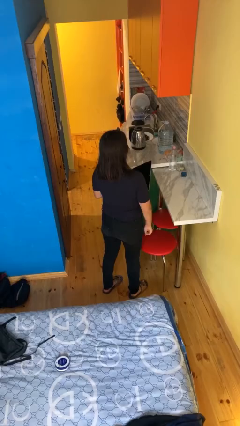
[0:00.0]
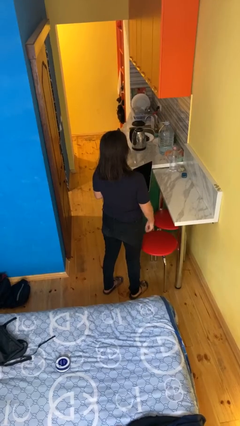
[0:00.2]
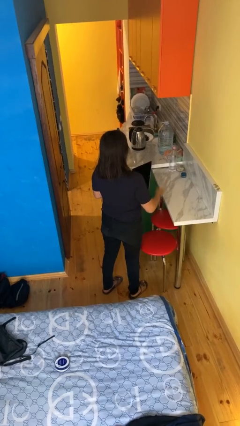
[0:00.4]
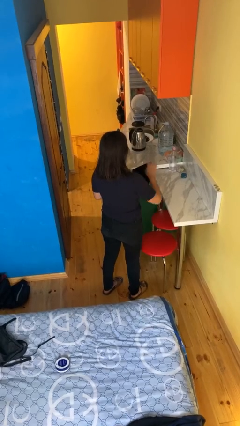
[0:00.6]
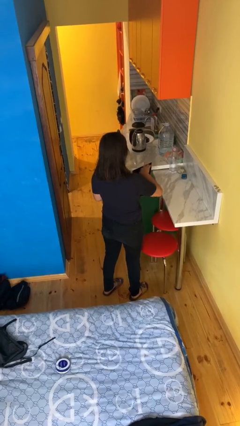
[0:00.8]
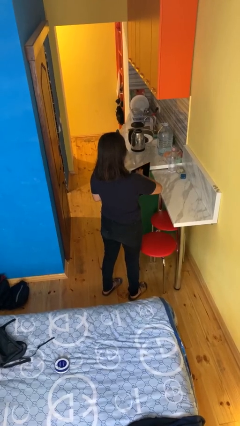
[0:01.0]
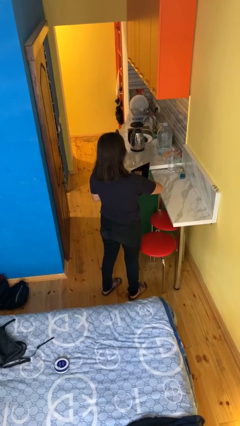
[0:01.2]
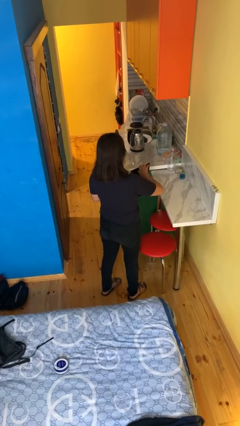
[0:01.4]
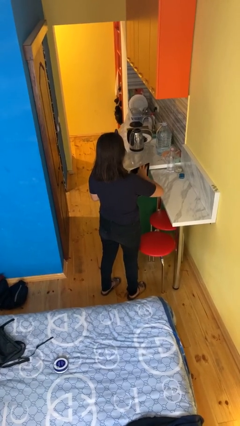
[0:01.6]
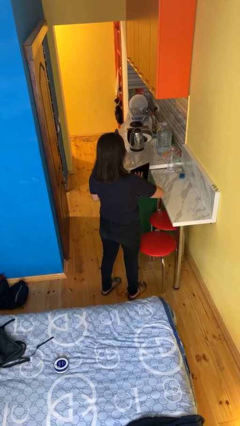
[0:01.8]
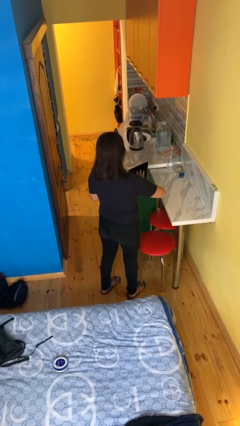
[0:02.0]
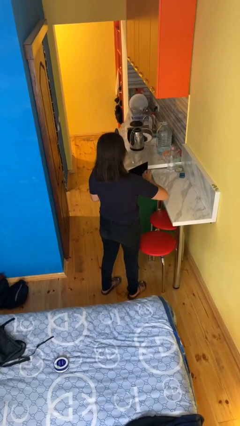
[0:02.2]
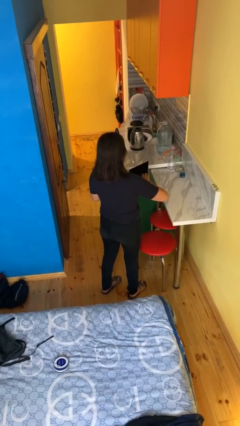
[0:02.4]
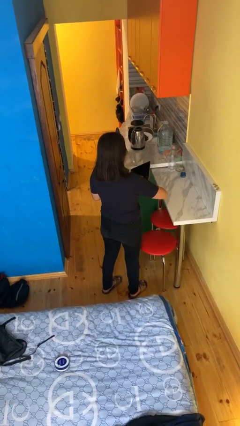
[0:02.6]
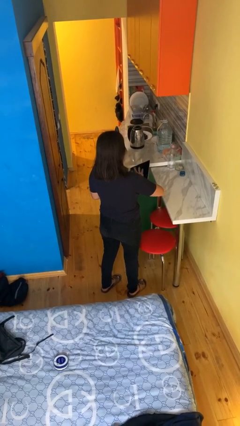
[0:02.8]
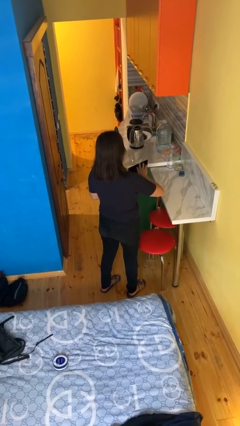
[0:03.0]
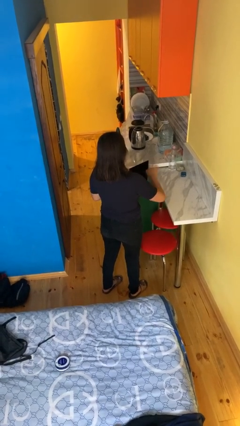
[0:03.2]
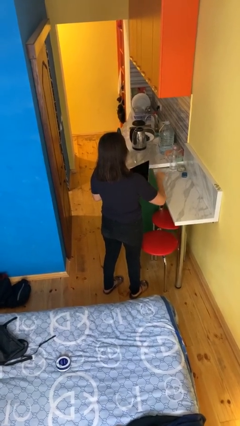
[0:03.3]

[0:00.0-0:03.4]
person interacts with tablet

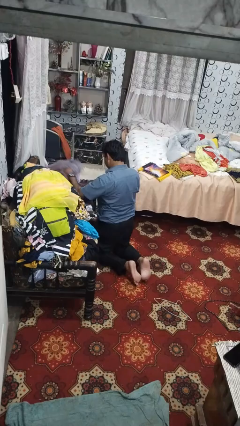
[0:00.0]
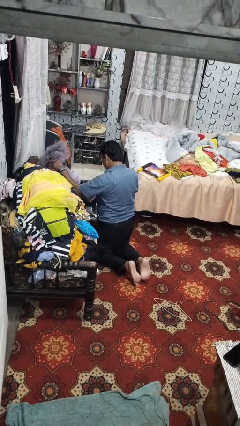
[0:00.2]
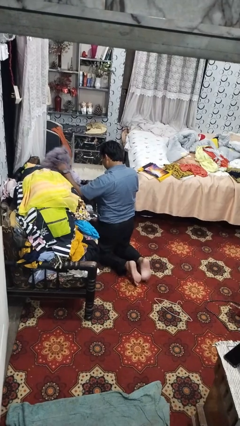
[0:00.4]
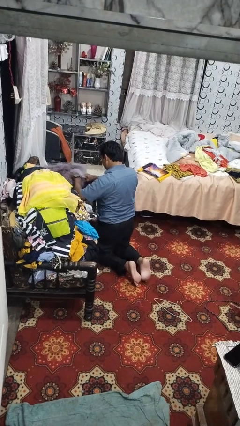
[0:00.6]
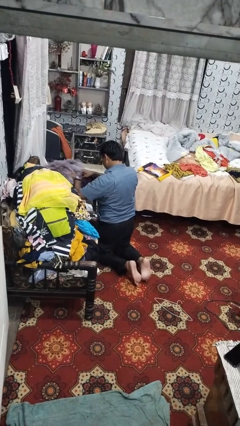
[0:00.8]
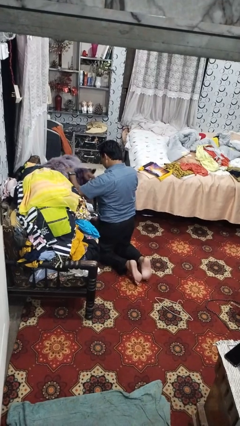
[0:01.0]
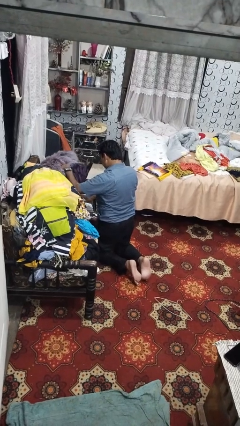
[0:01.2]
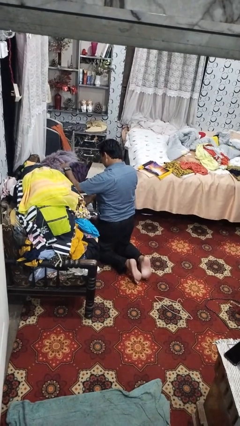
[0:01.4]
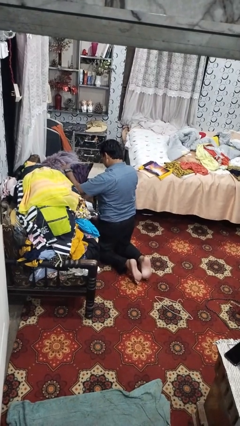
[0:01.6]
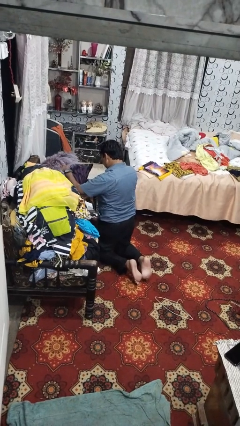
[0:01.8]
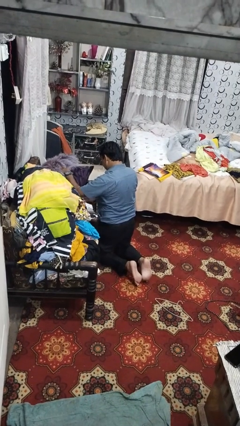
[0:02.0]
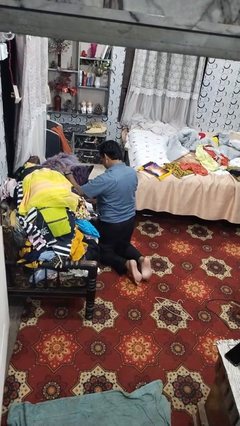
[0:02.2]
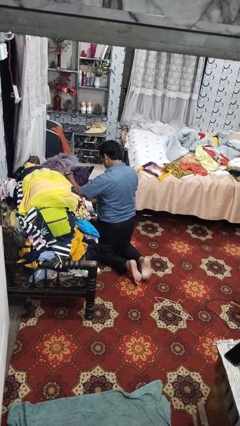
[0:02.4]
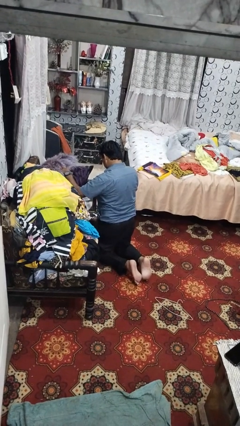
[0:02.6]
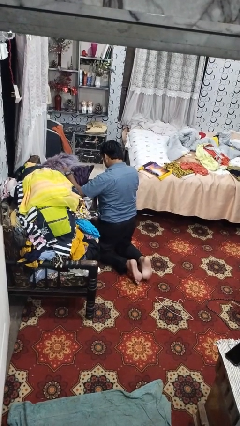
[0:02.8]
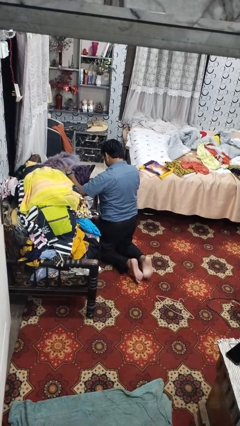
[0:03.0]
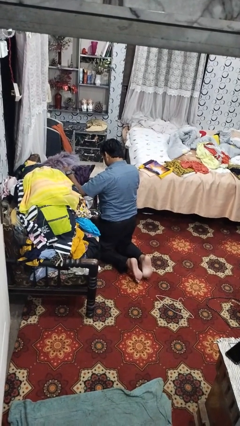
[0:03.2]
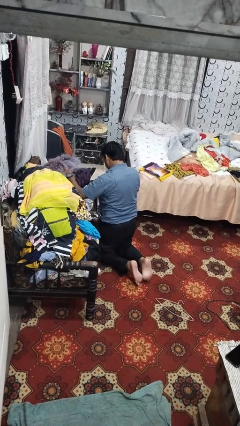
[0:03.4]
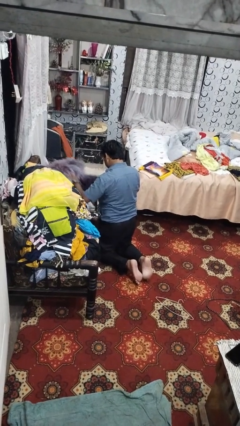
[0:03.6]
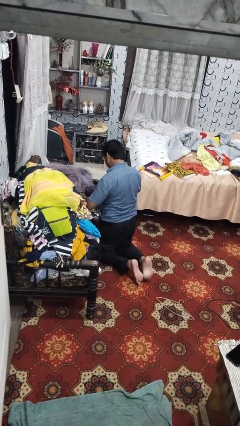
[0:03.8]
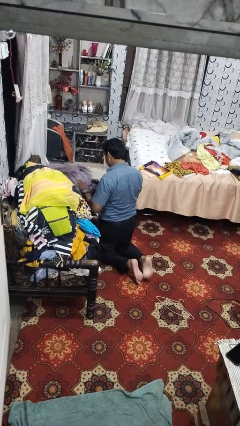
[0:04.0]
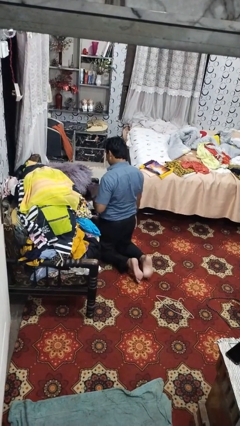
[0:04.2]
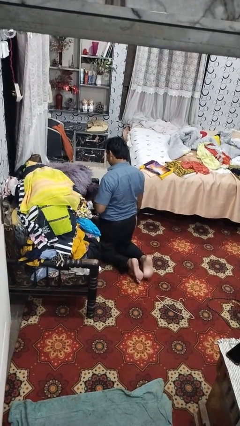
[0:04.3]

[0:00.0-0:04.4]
person searches in couch

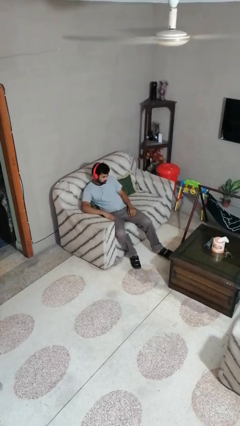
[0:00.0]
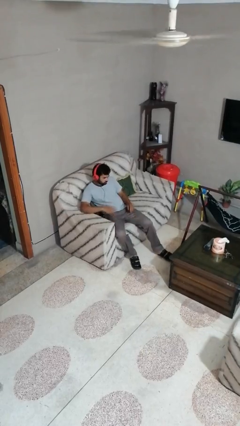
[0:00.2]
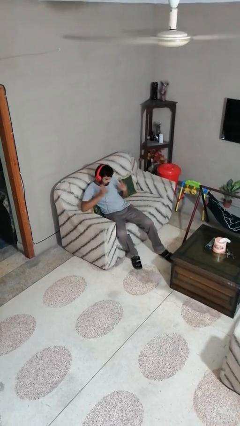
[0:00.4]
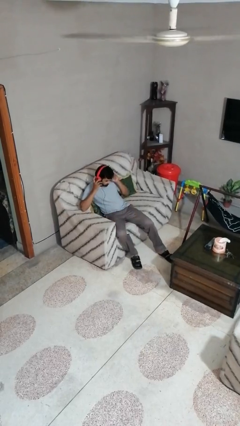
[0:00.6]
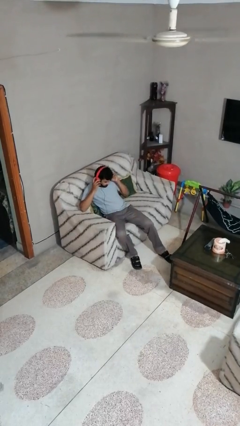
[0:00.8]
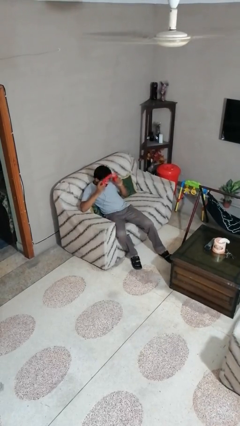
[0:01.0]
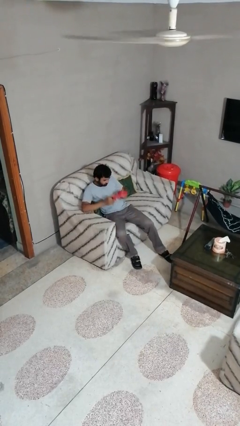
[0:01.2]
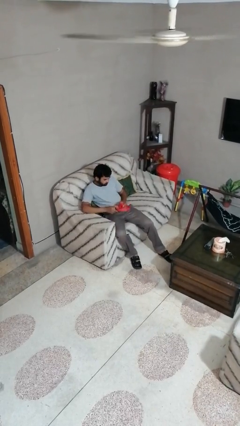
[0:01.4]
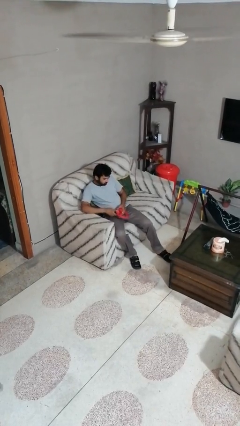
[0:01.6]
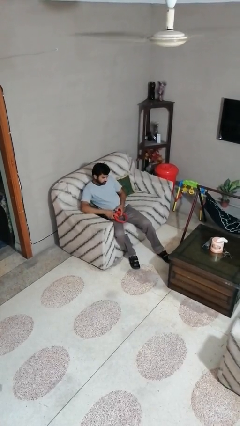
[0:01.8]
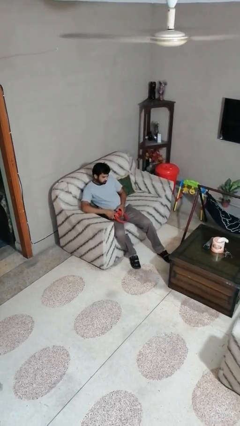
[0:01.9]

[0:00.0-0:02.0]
person takes off headphones

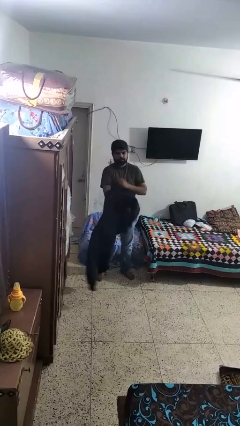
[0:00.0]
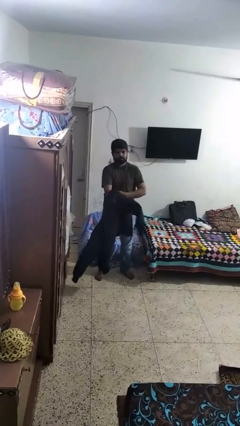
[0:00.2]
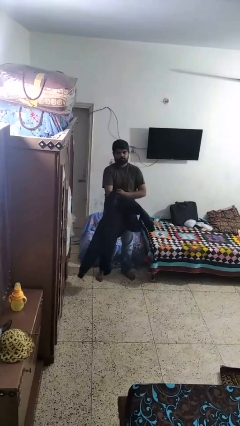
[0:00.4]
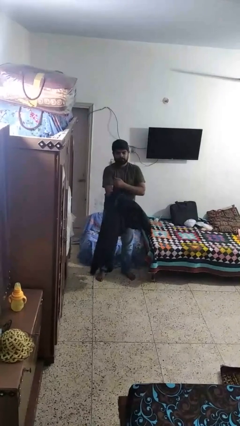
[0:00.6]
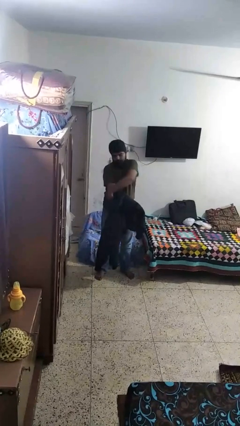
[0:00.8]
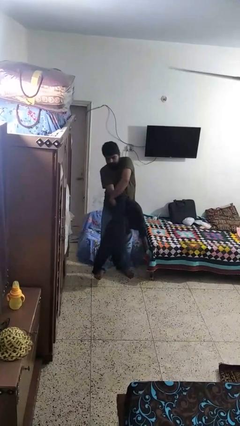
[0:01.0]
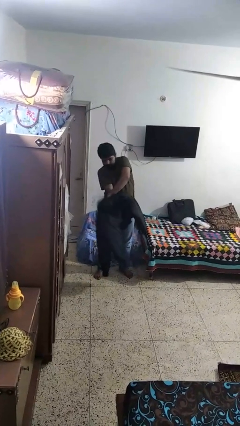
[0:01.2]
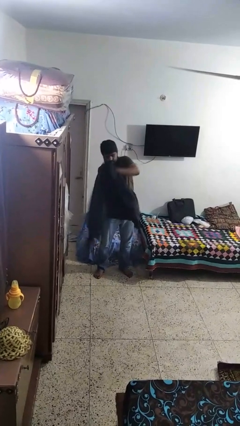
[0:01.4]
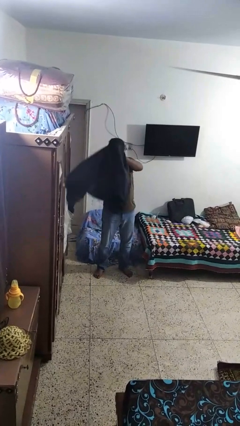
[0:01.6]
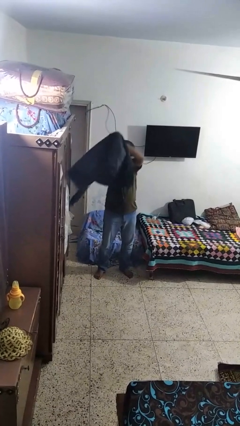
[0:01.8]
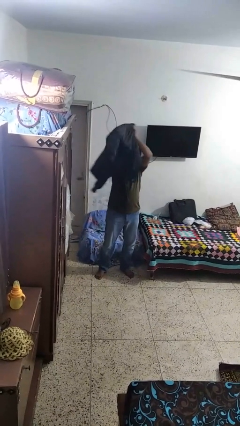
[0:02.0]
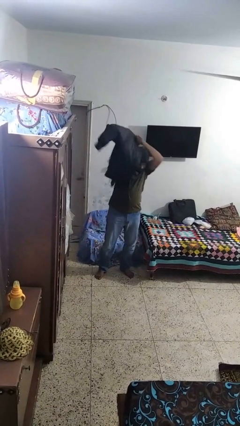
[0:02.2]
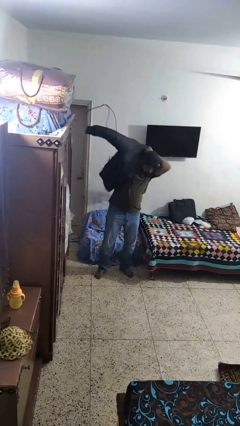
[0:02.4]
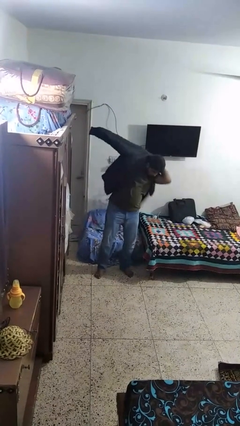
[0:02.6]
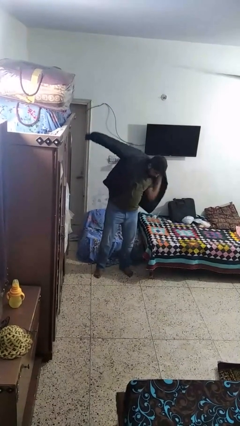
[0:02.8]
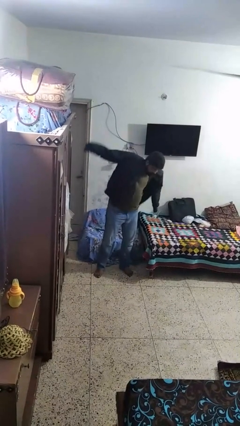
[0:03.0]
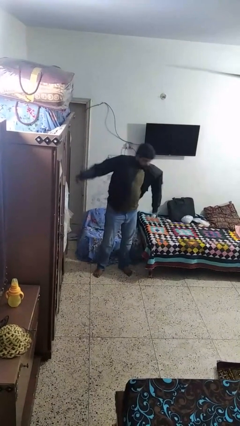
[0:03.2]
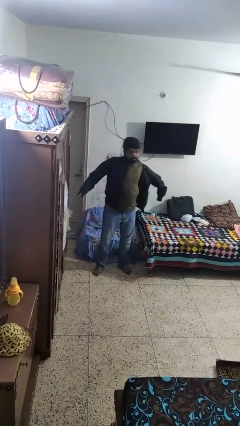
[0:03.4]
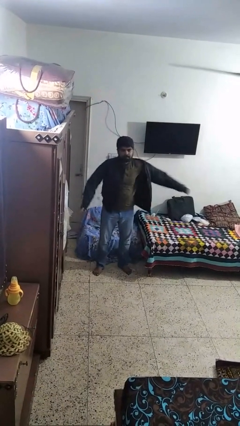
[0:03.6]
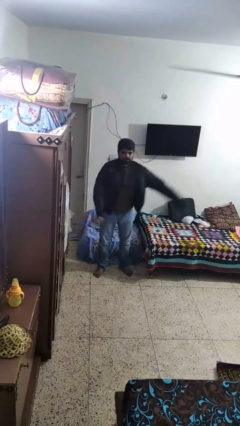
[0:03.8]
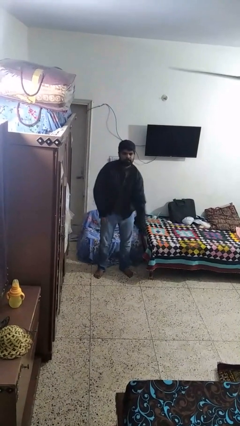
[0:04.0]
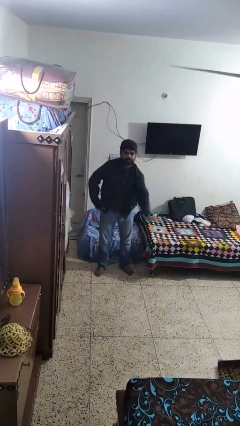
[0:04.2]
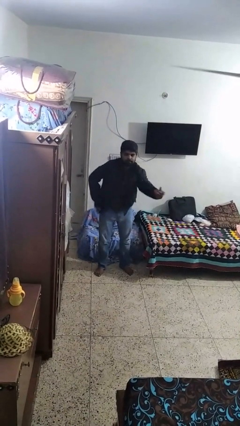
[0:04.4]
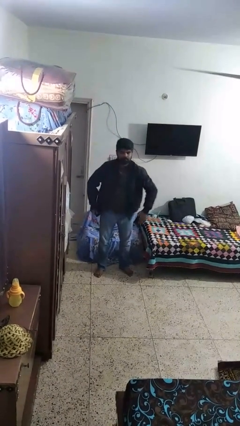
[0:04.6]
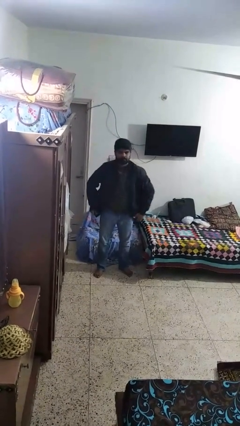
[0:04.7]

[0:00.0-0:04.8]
person puts on jacket

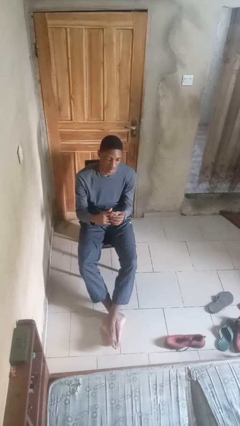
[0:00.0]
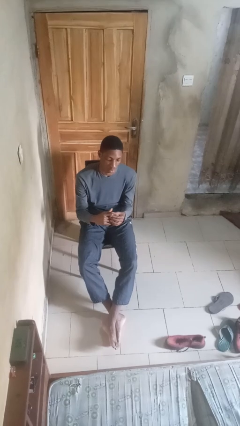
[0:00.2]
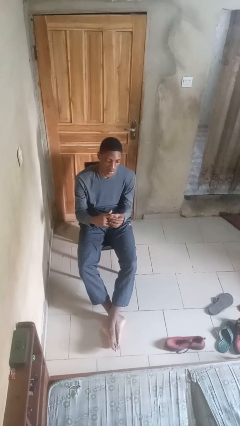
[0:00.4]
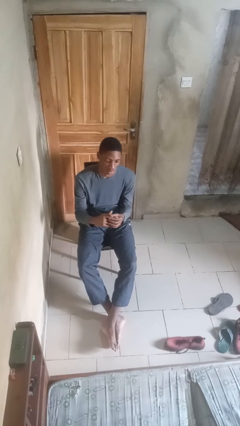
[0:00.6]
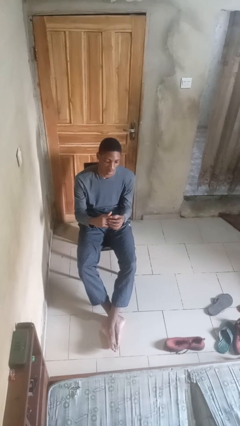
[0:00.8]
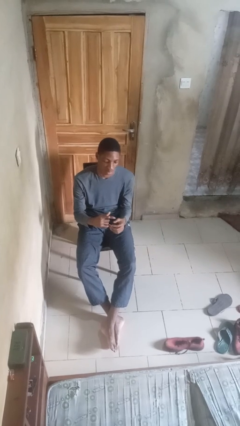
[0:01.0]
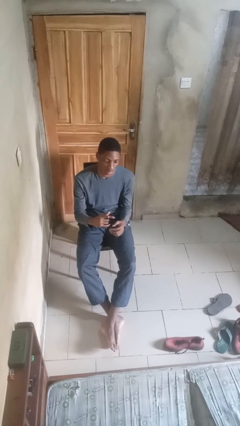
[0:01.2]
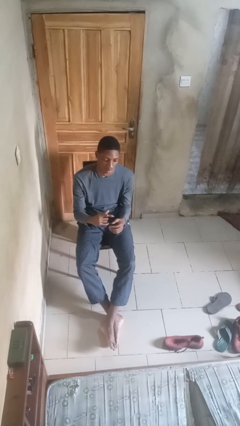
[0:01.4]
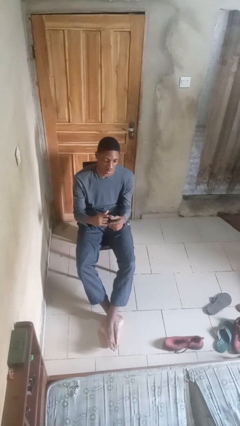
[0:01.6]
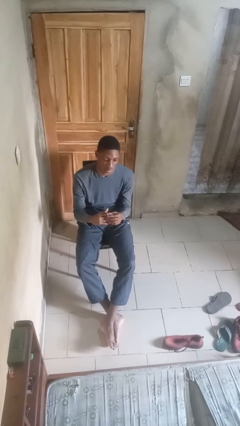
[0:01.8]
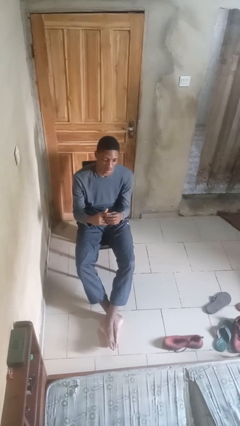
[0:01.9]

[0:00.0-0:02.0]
person puts on ring

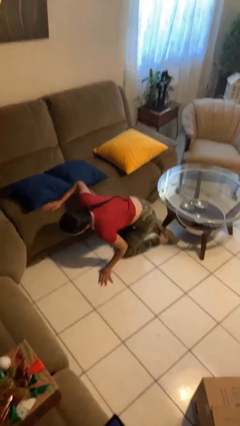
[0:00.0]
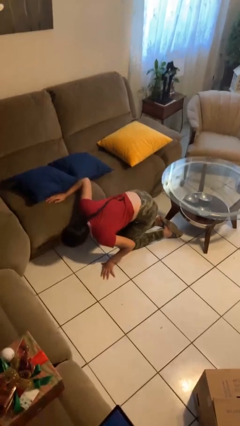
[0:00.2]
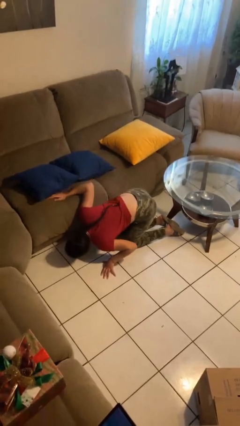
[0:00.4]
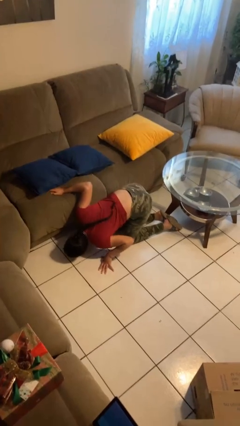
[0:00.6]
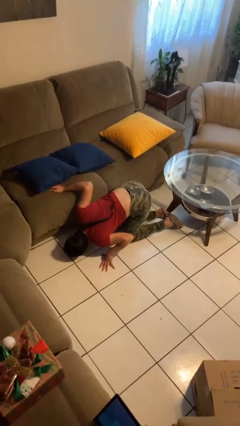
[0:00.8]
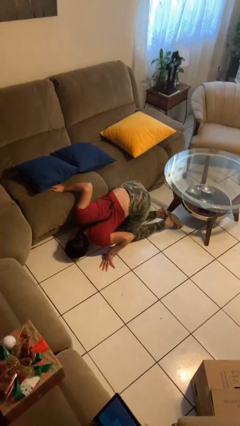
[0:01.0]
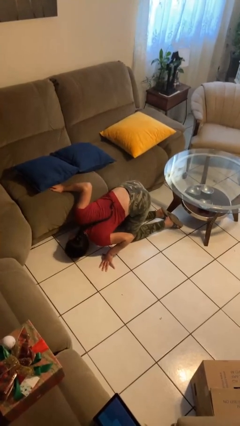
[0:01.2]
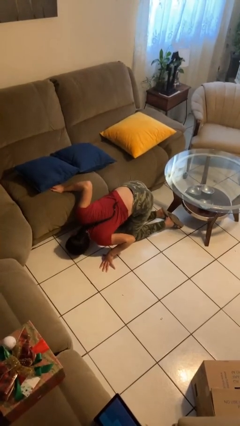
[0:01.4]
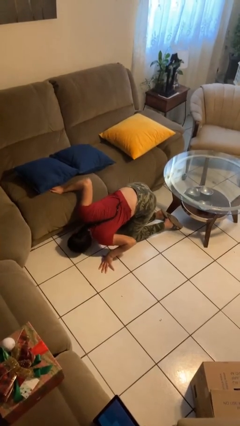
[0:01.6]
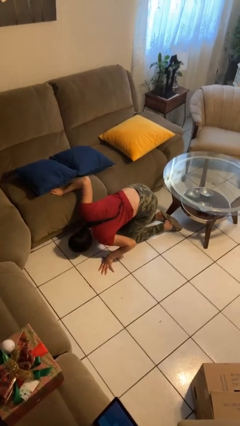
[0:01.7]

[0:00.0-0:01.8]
person searches under couch
